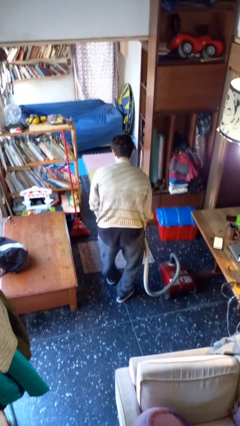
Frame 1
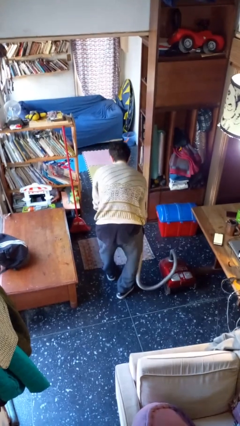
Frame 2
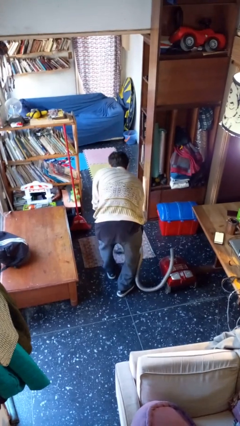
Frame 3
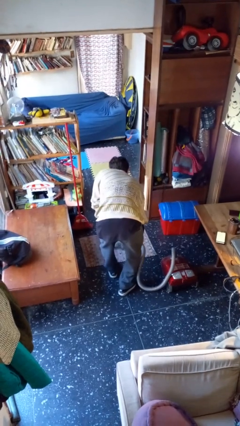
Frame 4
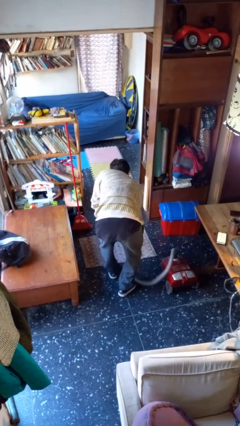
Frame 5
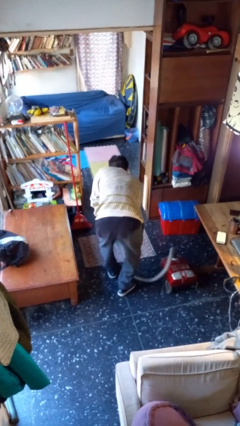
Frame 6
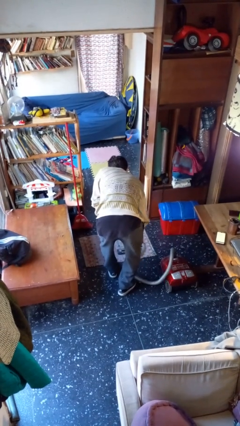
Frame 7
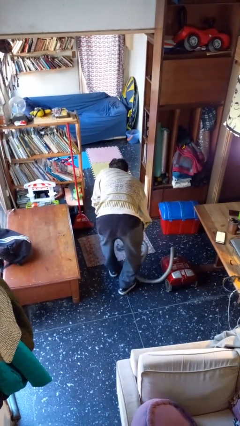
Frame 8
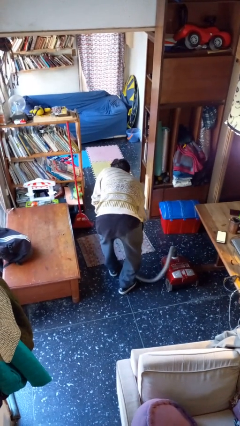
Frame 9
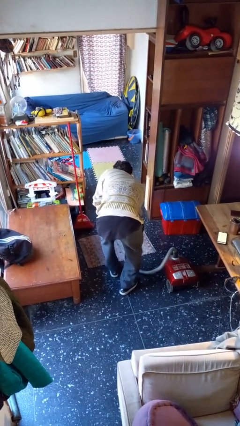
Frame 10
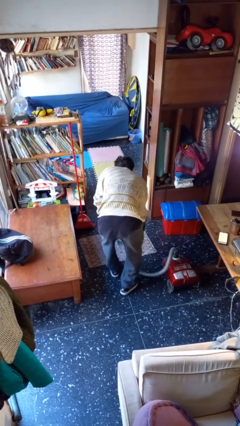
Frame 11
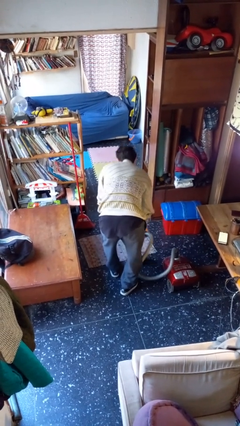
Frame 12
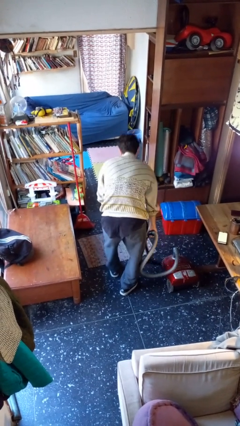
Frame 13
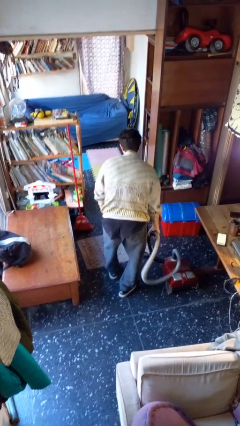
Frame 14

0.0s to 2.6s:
person vacuums carpet

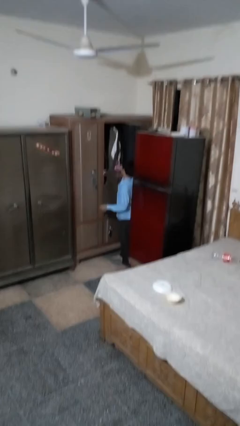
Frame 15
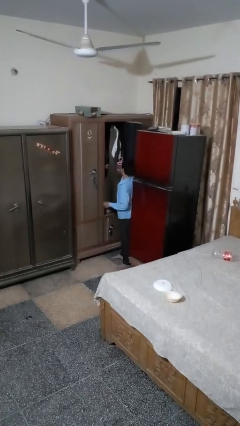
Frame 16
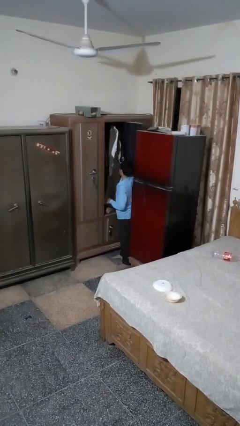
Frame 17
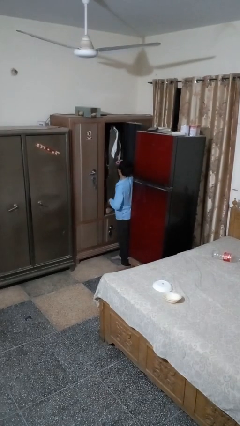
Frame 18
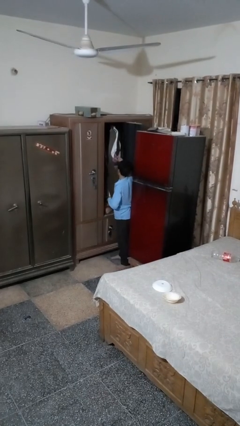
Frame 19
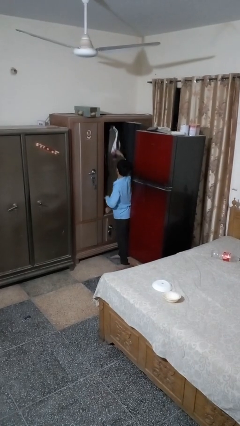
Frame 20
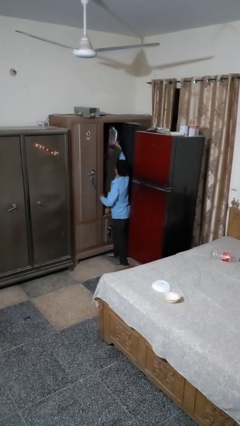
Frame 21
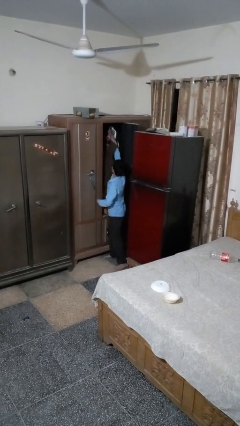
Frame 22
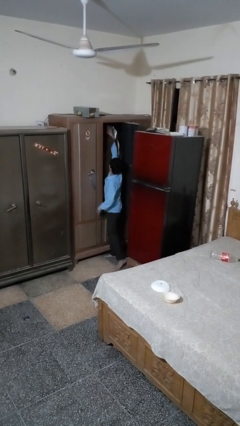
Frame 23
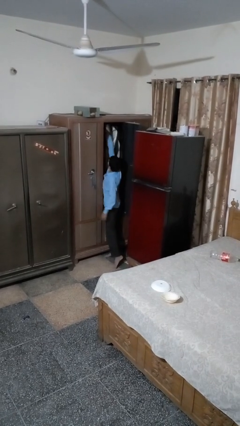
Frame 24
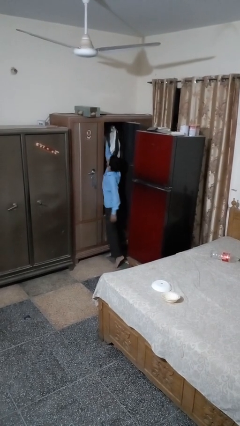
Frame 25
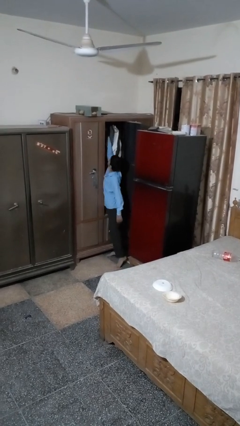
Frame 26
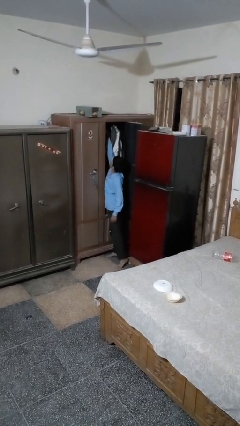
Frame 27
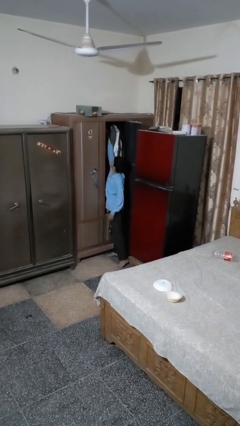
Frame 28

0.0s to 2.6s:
person puts clothes into closet

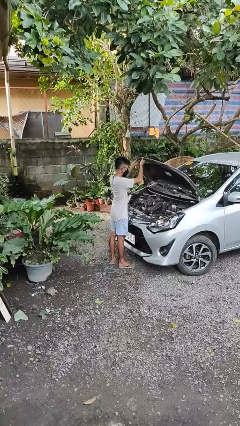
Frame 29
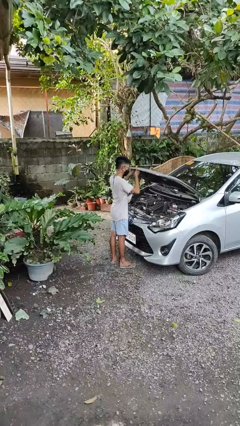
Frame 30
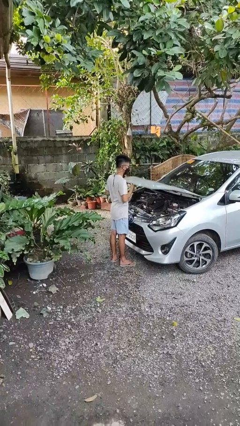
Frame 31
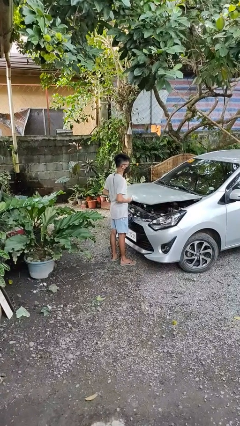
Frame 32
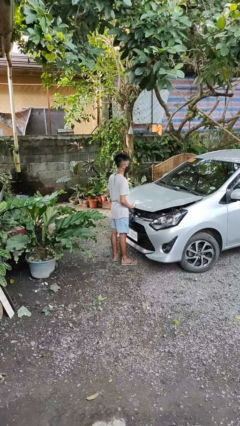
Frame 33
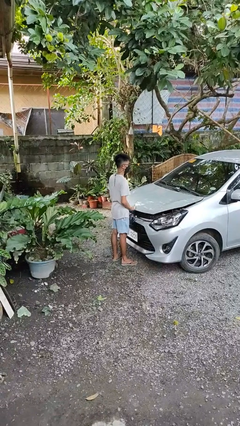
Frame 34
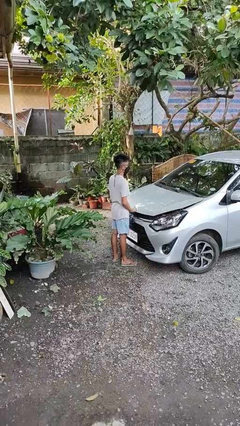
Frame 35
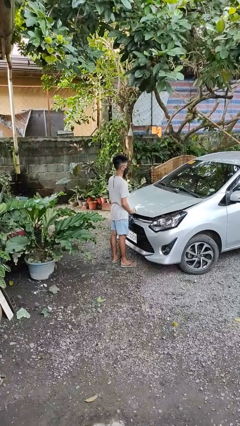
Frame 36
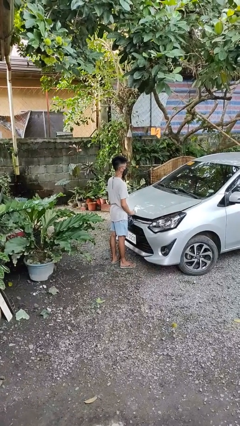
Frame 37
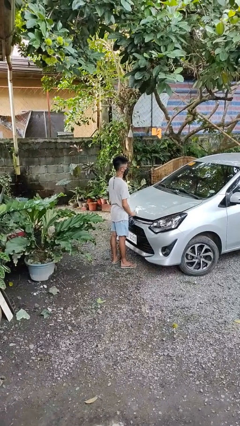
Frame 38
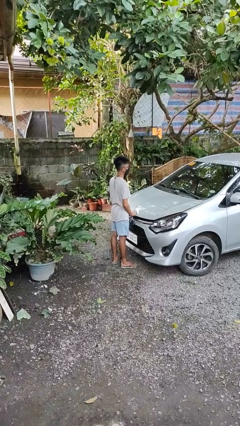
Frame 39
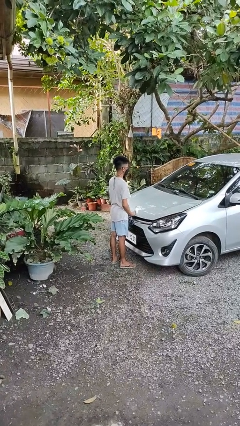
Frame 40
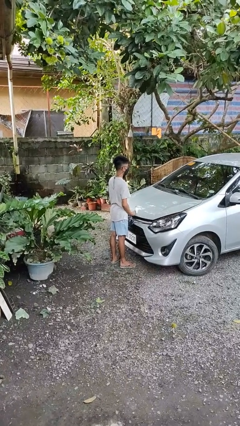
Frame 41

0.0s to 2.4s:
person closes car hood

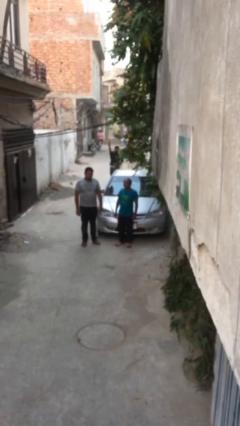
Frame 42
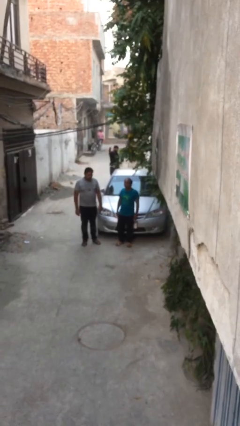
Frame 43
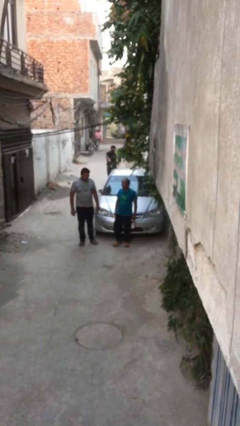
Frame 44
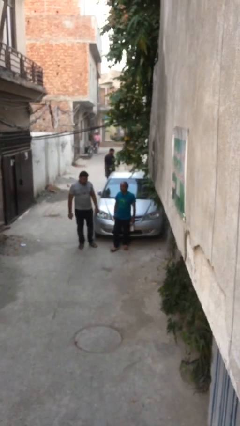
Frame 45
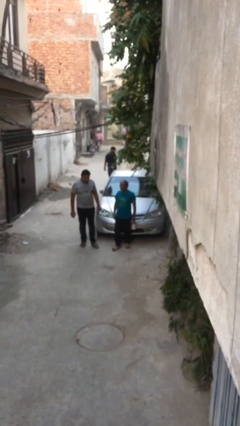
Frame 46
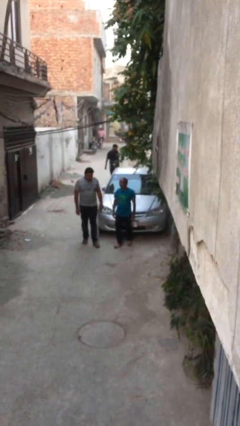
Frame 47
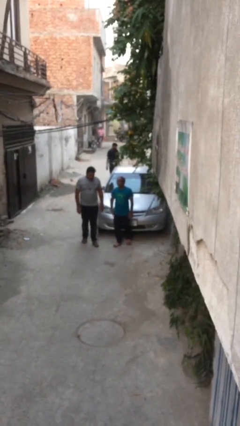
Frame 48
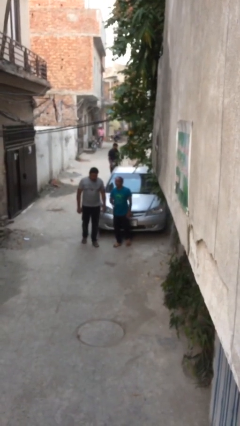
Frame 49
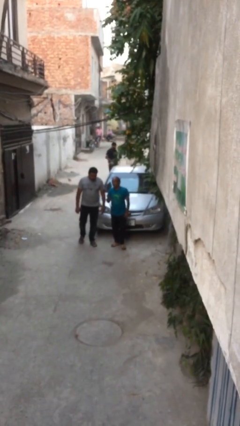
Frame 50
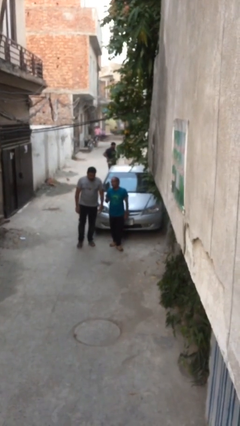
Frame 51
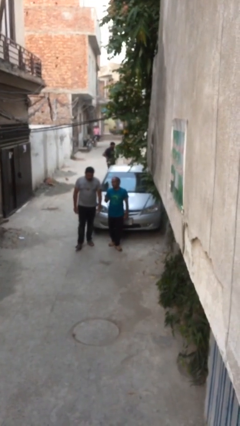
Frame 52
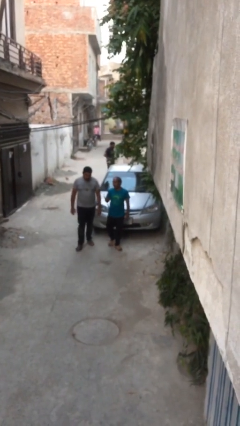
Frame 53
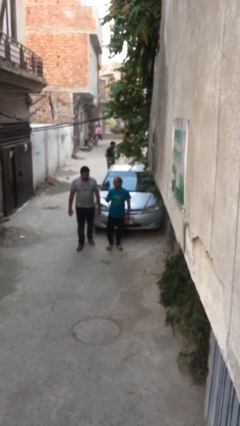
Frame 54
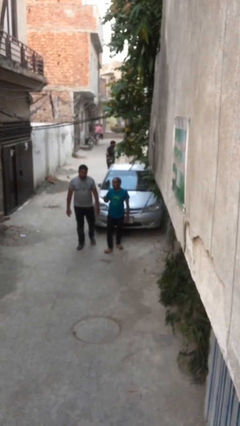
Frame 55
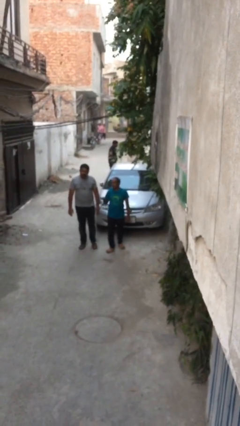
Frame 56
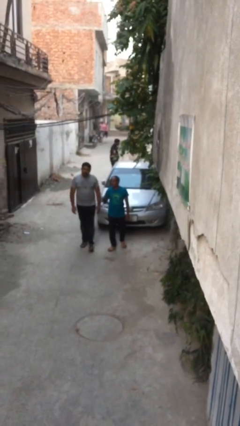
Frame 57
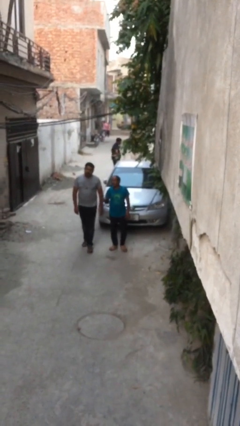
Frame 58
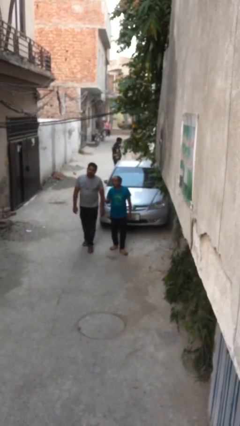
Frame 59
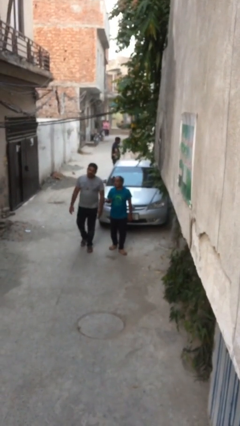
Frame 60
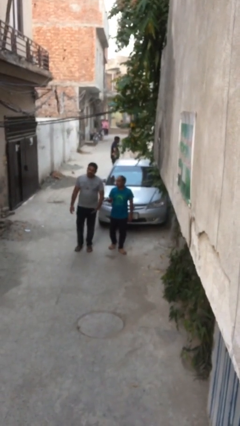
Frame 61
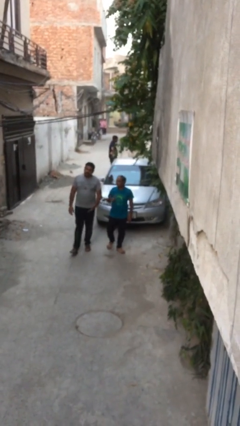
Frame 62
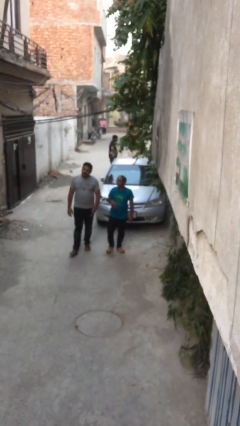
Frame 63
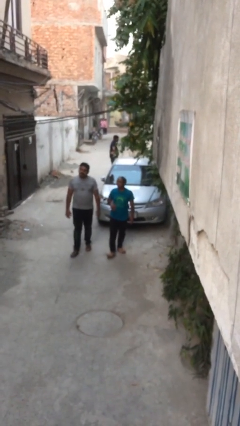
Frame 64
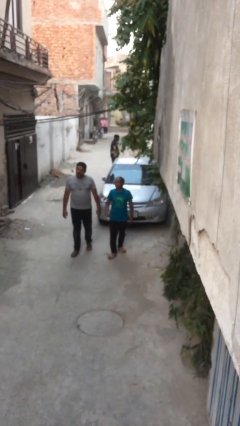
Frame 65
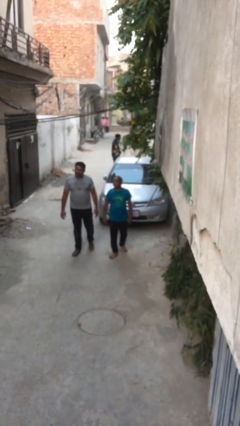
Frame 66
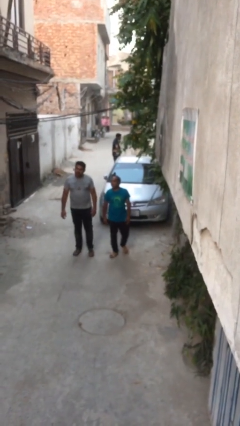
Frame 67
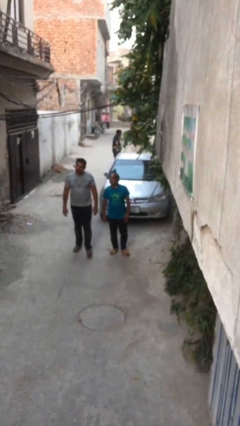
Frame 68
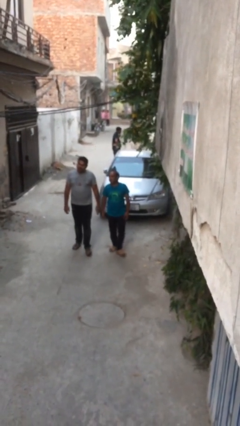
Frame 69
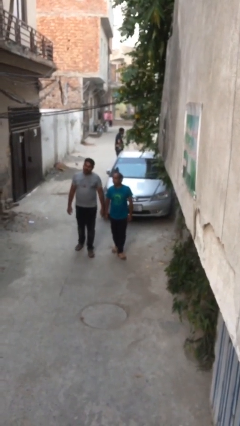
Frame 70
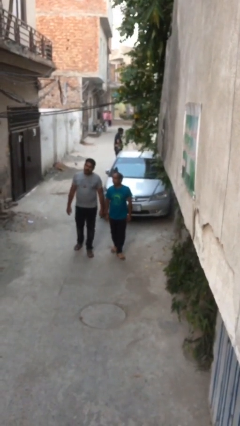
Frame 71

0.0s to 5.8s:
person talks to person

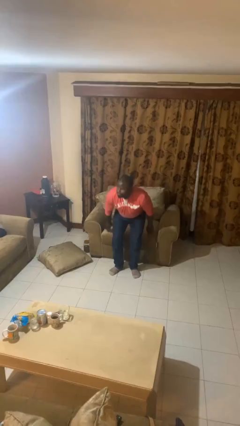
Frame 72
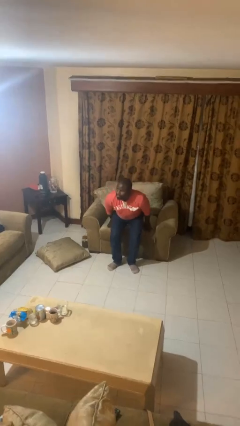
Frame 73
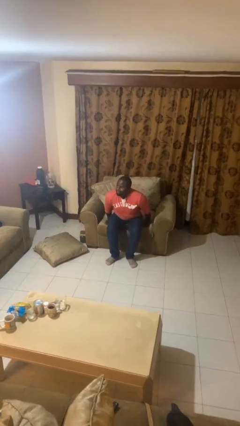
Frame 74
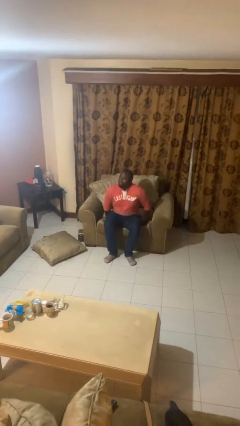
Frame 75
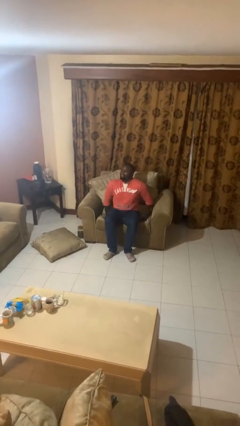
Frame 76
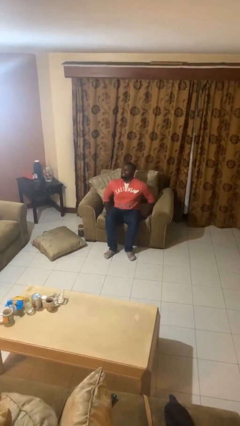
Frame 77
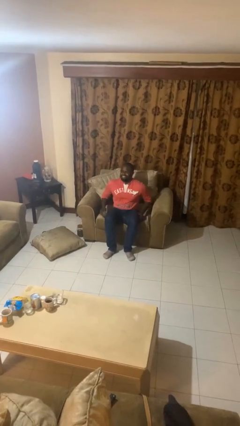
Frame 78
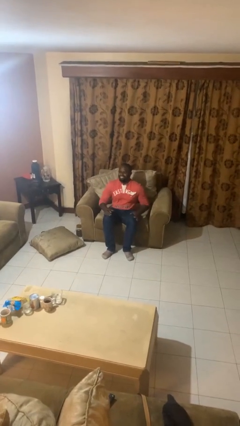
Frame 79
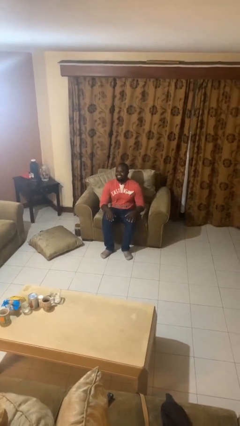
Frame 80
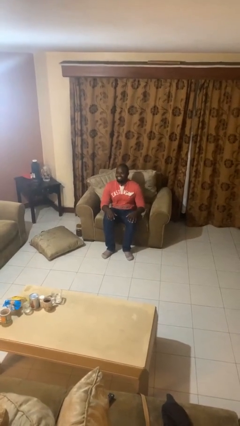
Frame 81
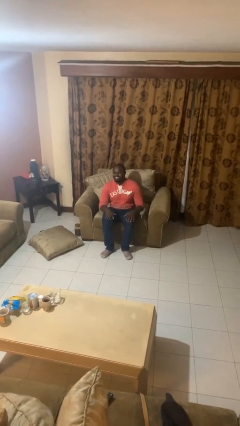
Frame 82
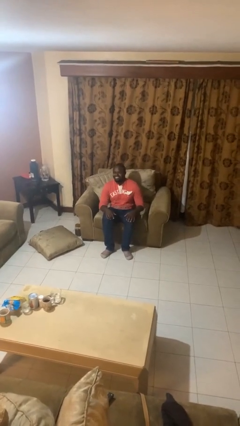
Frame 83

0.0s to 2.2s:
person sits down

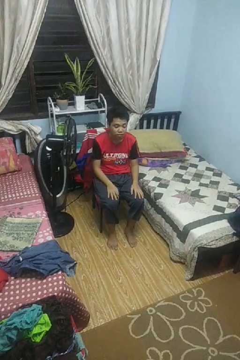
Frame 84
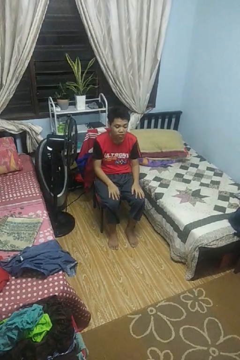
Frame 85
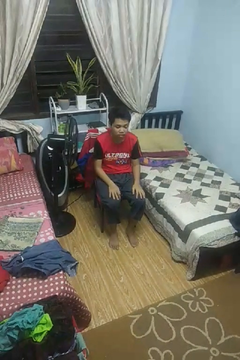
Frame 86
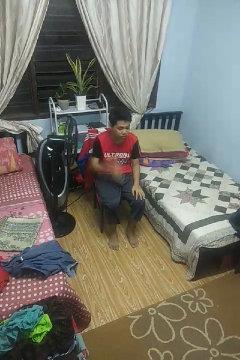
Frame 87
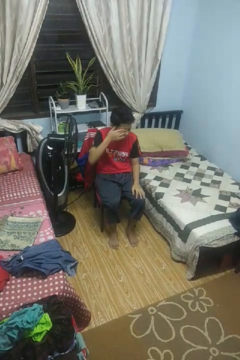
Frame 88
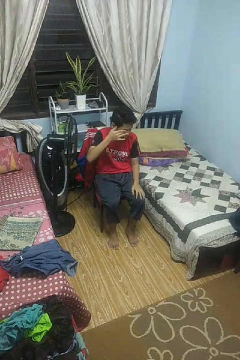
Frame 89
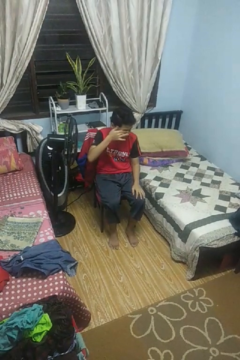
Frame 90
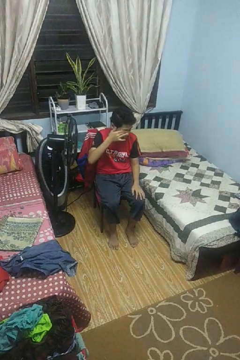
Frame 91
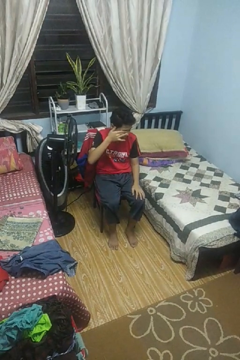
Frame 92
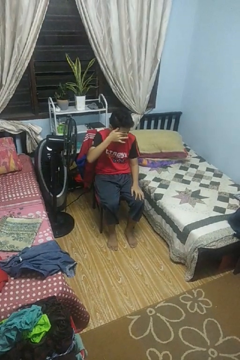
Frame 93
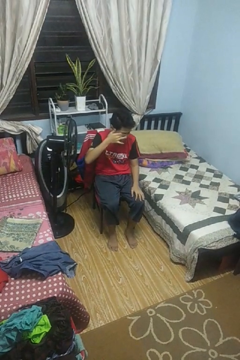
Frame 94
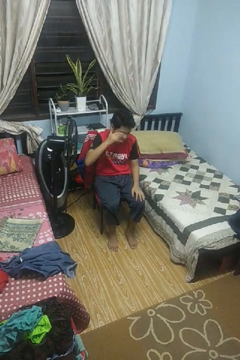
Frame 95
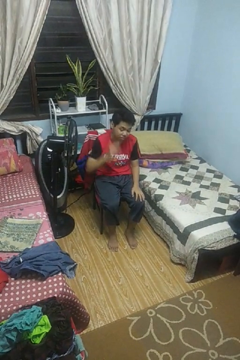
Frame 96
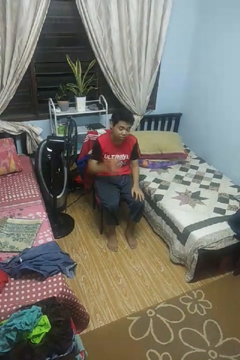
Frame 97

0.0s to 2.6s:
person rubs eyes
